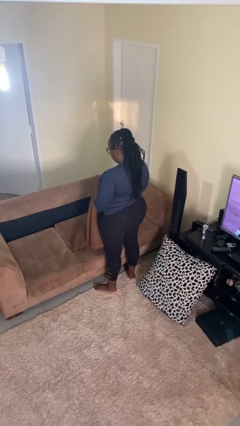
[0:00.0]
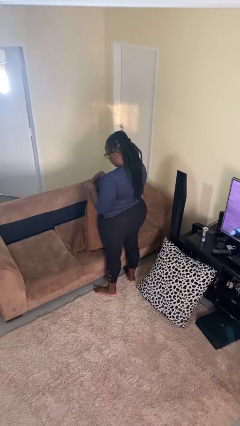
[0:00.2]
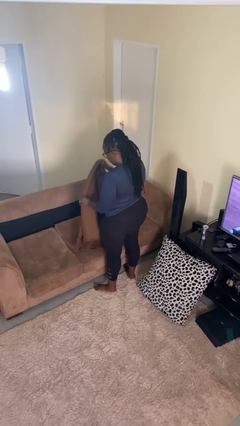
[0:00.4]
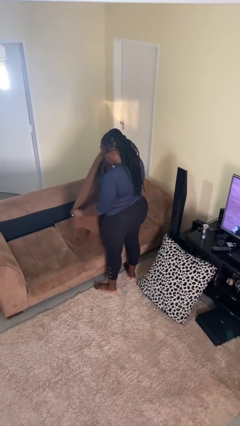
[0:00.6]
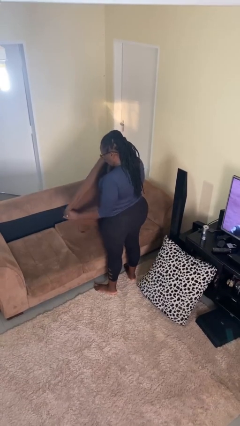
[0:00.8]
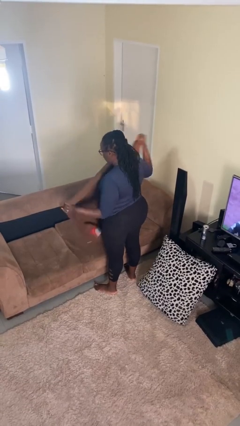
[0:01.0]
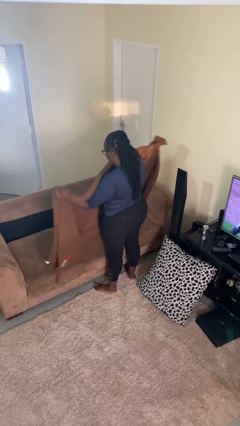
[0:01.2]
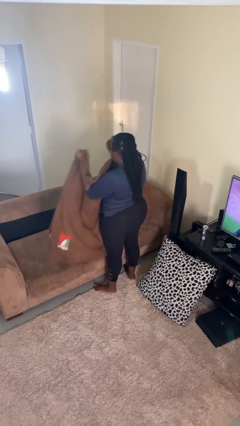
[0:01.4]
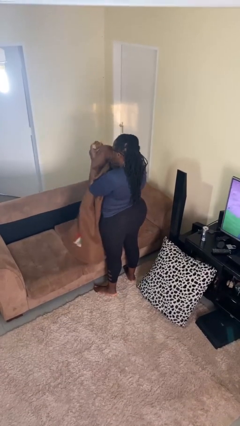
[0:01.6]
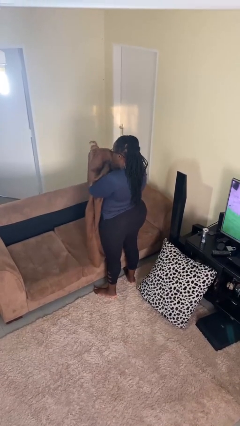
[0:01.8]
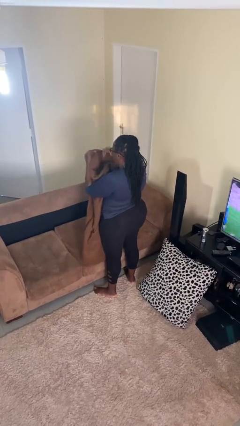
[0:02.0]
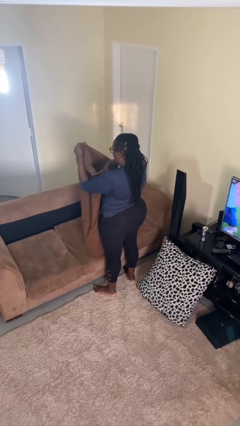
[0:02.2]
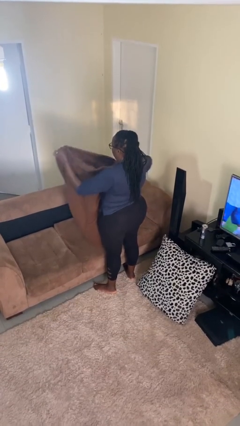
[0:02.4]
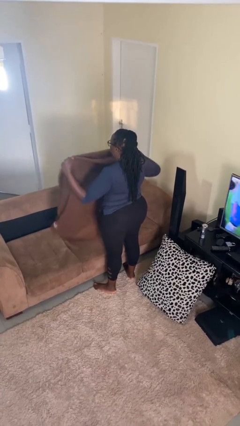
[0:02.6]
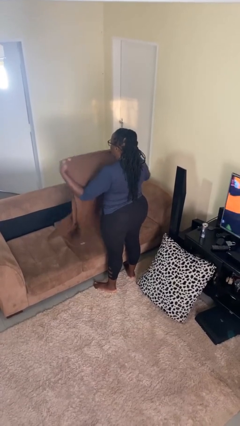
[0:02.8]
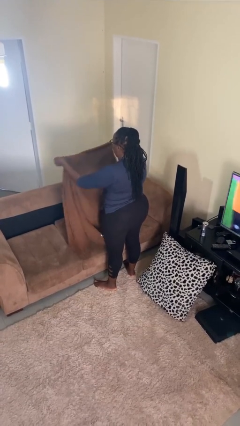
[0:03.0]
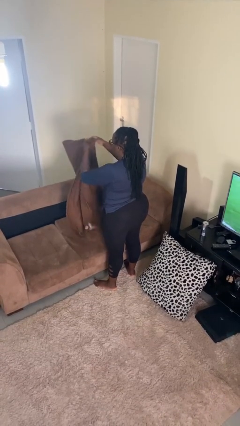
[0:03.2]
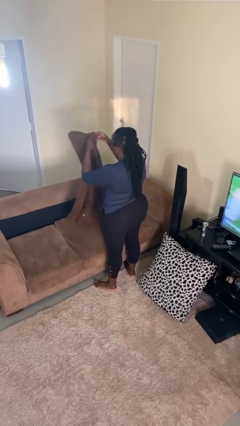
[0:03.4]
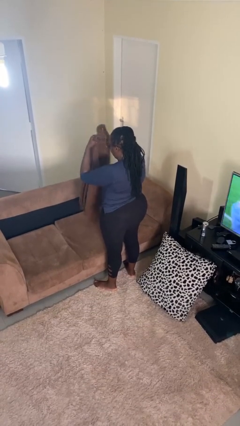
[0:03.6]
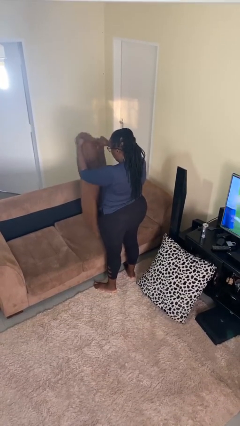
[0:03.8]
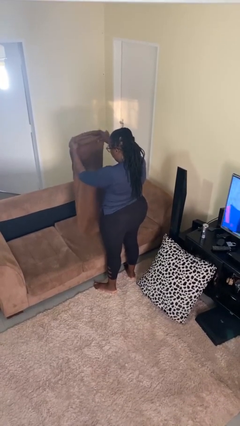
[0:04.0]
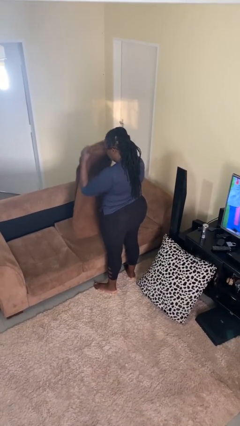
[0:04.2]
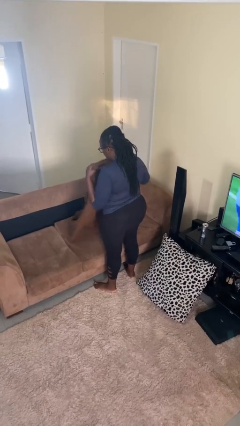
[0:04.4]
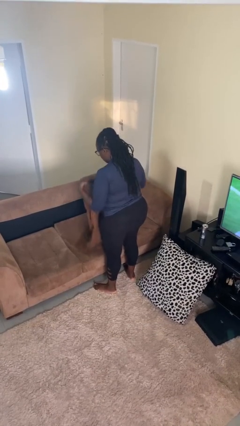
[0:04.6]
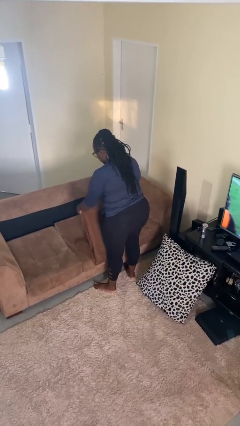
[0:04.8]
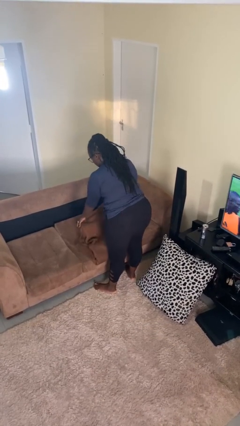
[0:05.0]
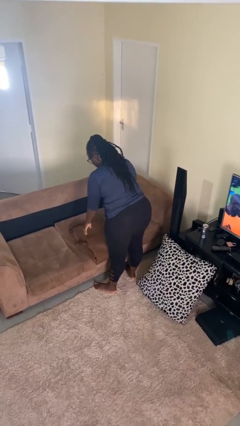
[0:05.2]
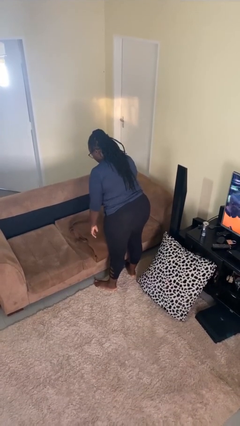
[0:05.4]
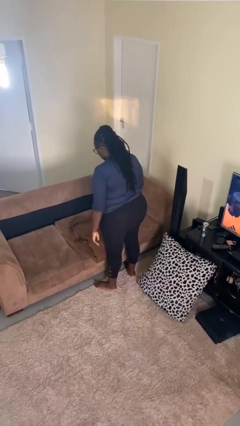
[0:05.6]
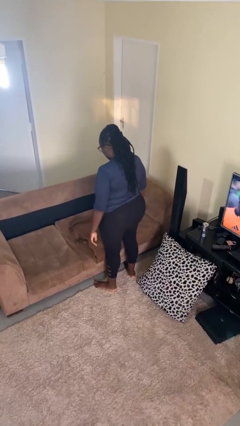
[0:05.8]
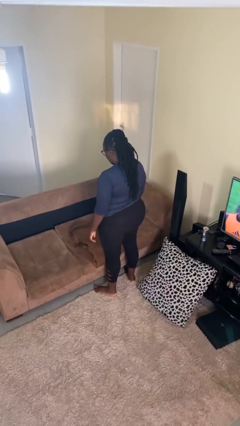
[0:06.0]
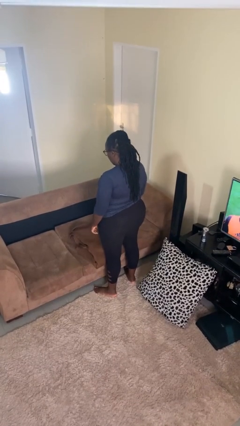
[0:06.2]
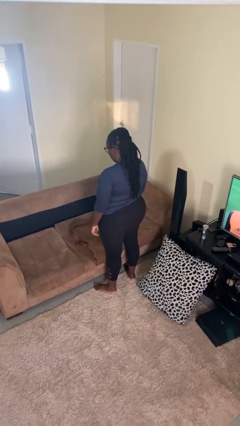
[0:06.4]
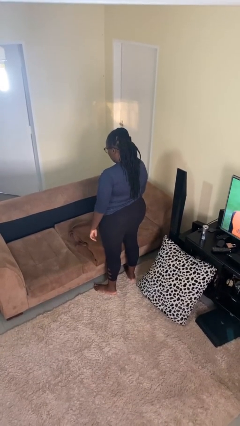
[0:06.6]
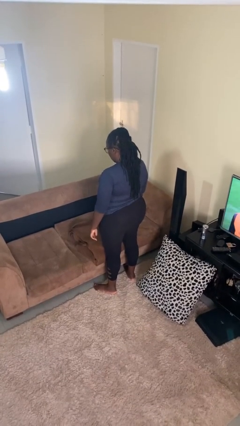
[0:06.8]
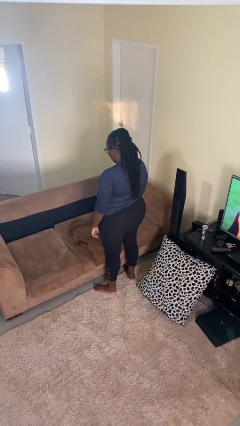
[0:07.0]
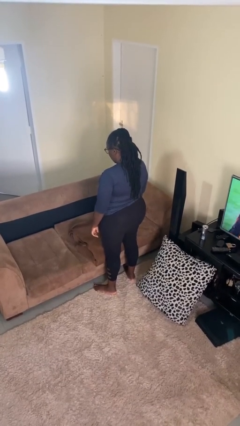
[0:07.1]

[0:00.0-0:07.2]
person folds blanket

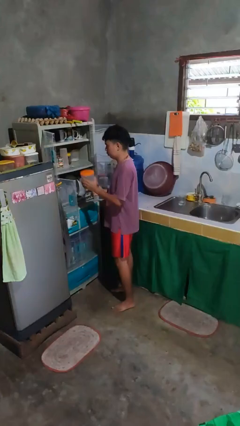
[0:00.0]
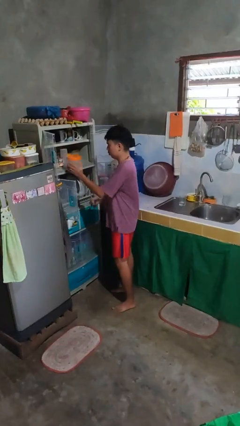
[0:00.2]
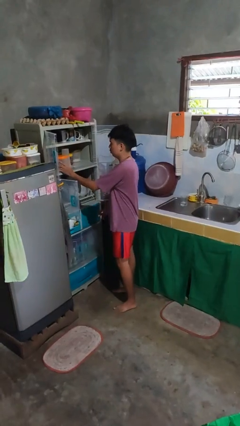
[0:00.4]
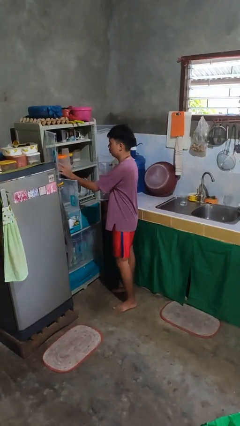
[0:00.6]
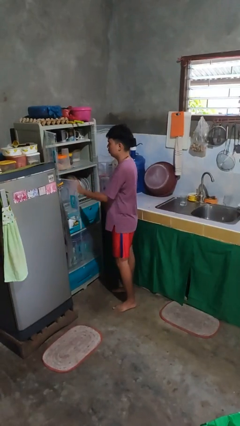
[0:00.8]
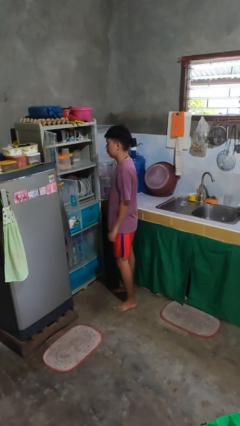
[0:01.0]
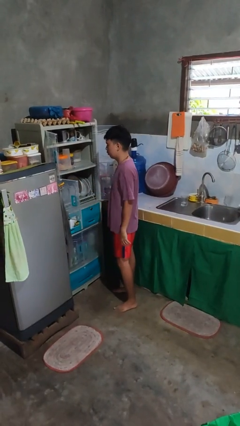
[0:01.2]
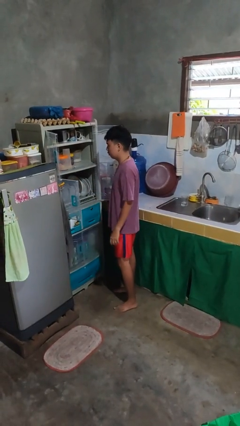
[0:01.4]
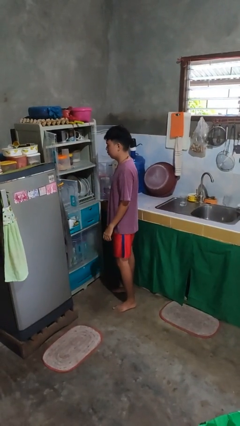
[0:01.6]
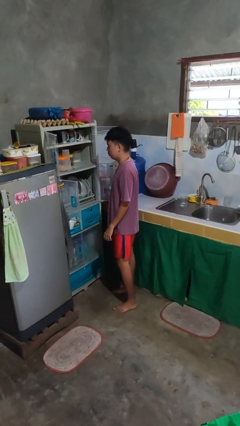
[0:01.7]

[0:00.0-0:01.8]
person puts object in cabinet

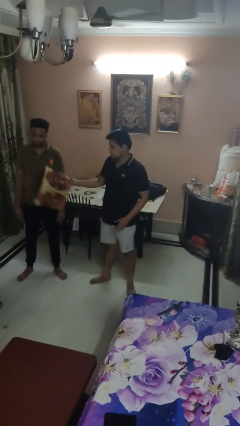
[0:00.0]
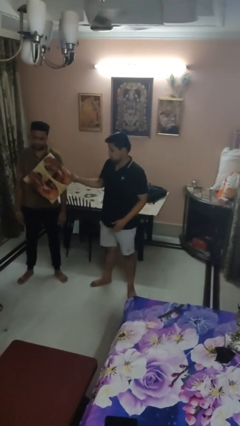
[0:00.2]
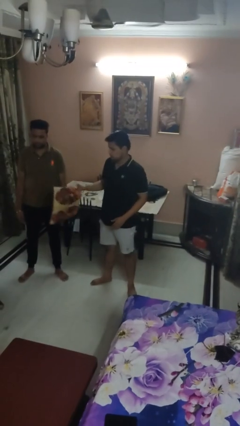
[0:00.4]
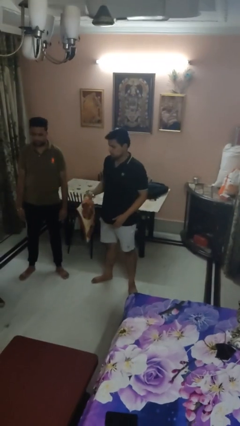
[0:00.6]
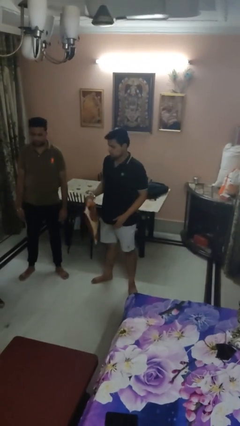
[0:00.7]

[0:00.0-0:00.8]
person hits person with pillow

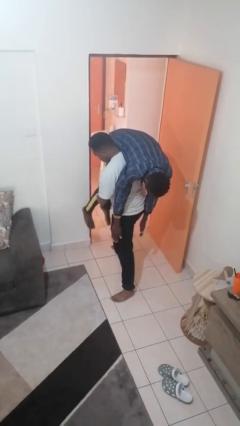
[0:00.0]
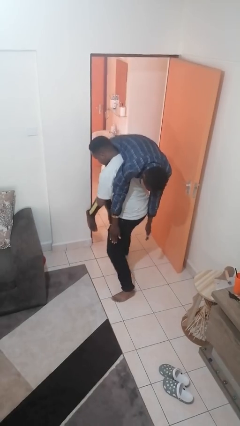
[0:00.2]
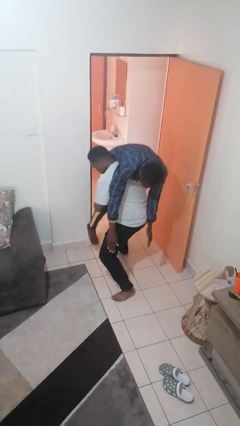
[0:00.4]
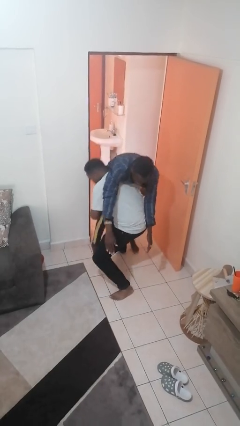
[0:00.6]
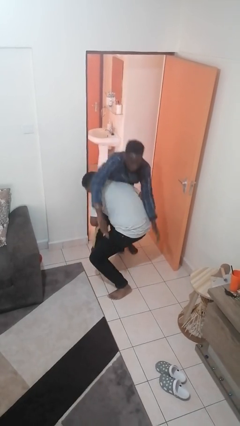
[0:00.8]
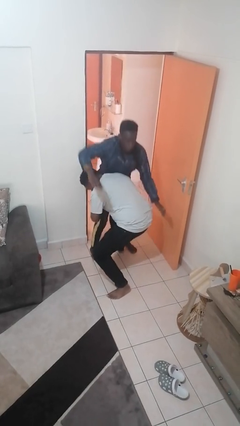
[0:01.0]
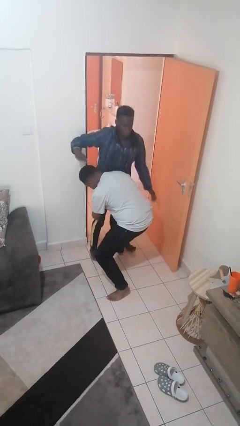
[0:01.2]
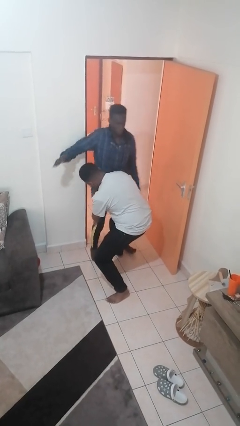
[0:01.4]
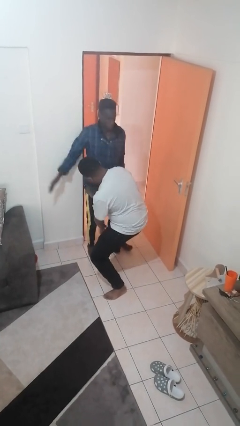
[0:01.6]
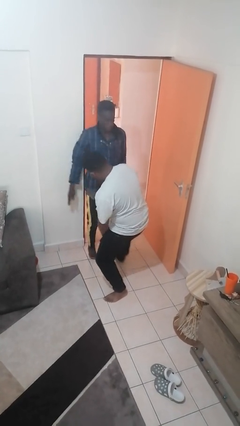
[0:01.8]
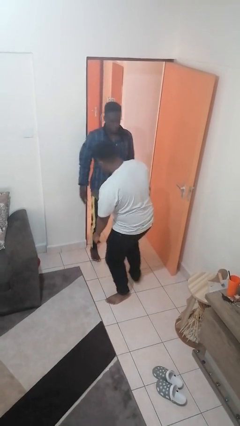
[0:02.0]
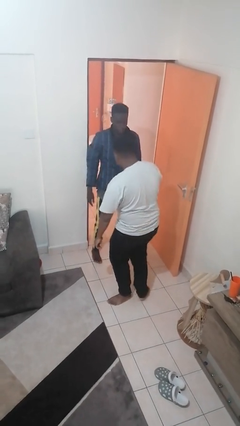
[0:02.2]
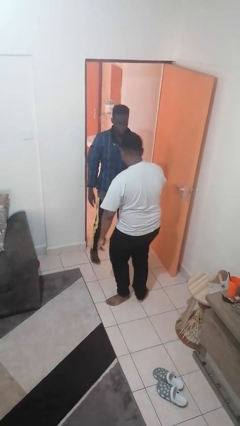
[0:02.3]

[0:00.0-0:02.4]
person puts down person

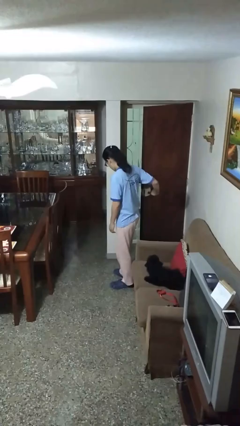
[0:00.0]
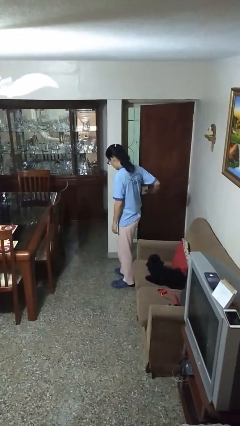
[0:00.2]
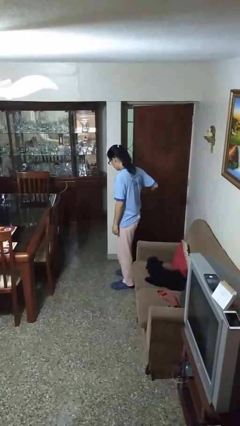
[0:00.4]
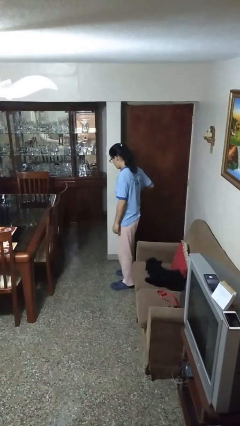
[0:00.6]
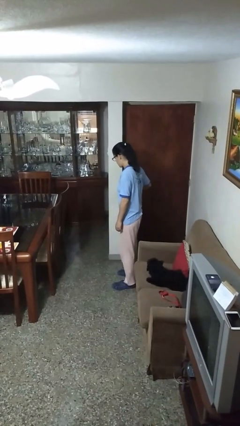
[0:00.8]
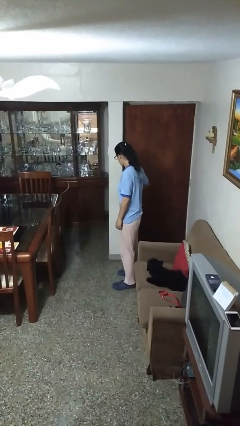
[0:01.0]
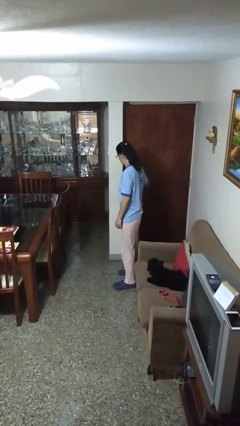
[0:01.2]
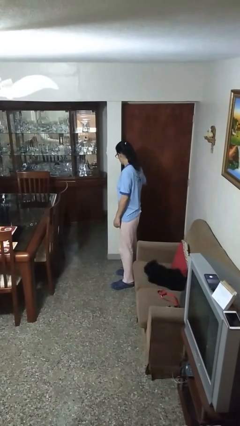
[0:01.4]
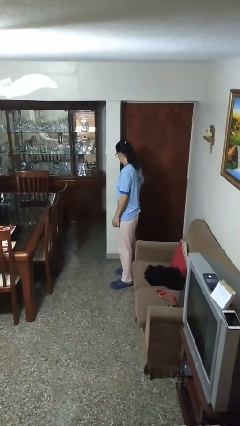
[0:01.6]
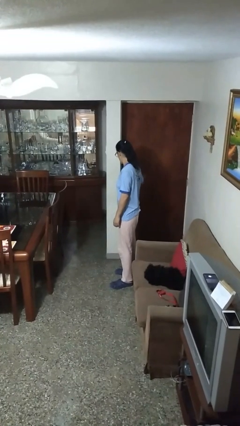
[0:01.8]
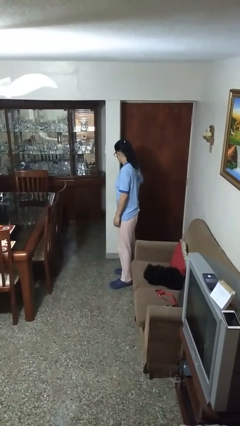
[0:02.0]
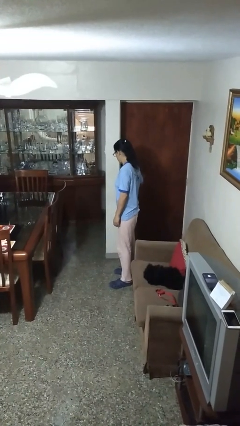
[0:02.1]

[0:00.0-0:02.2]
person closes facility door

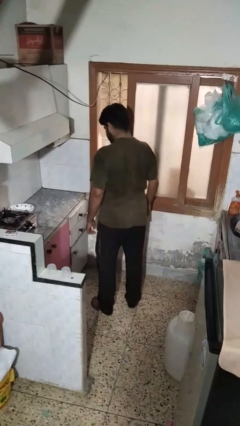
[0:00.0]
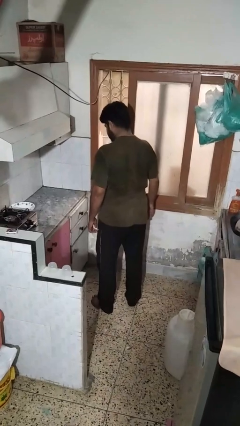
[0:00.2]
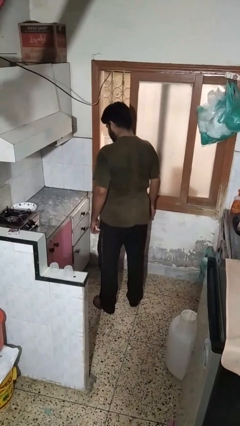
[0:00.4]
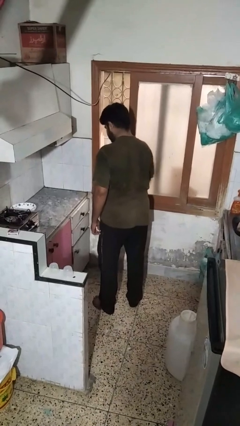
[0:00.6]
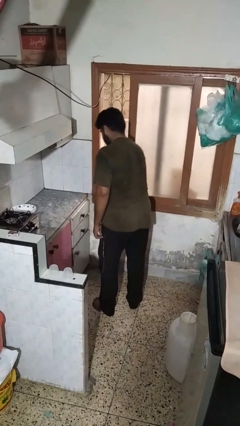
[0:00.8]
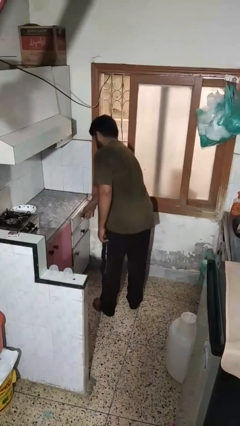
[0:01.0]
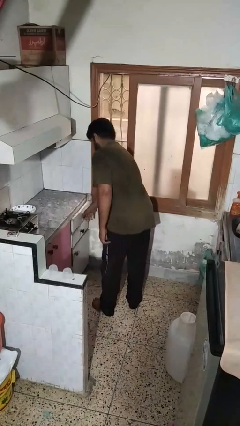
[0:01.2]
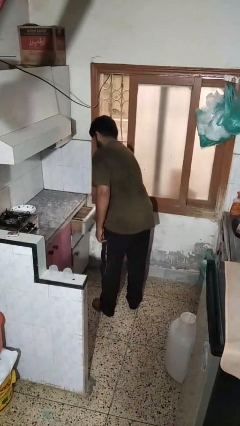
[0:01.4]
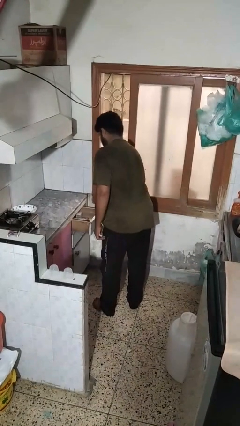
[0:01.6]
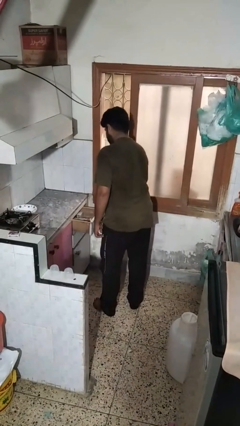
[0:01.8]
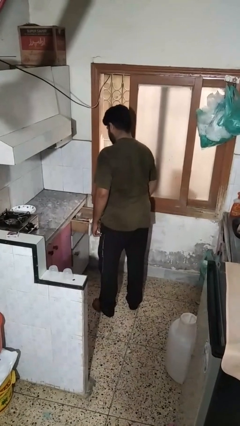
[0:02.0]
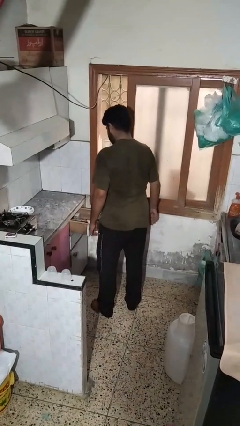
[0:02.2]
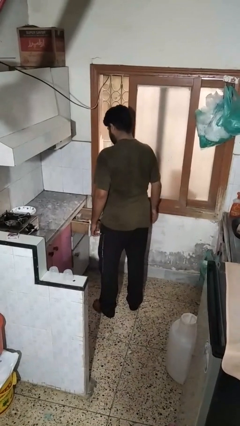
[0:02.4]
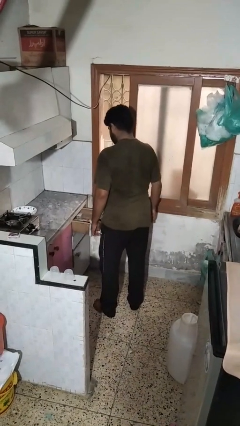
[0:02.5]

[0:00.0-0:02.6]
person opens kitchen drawer
